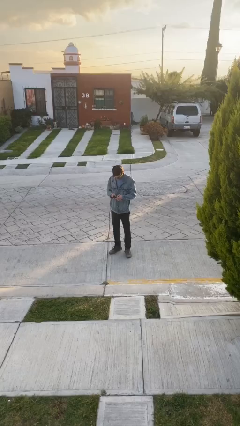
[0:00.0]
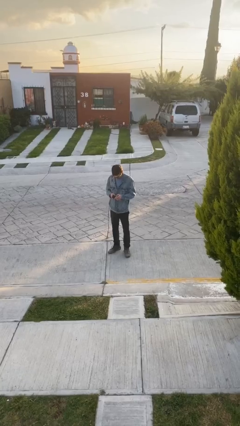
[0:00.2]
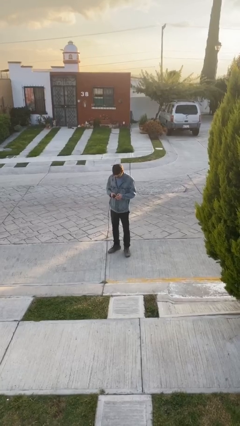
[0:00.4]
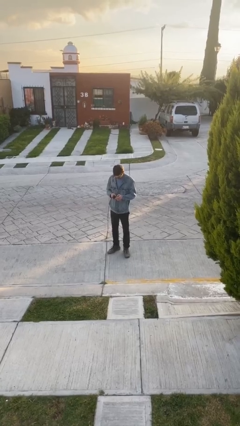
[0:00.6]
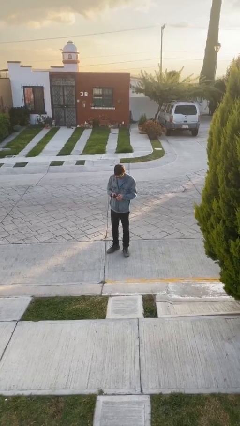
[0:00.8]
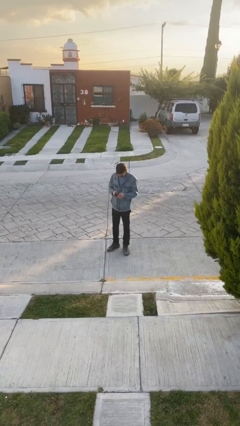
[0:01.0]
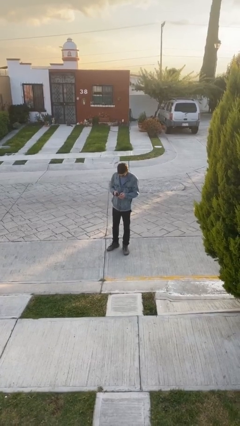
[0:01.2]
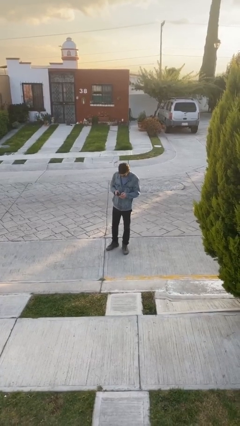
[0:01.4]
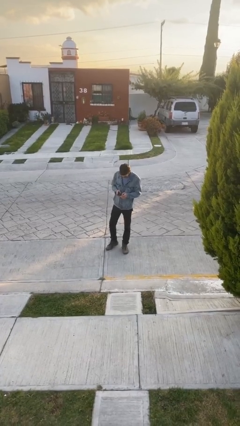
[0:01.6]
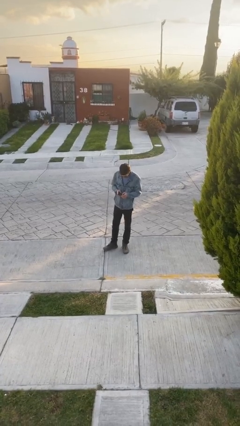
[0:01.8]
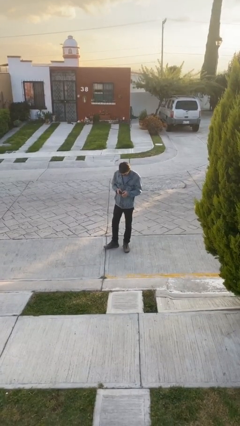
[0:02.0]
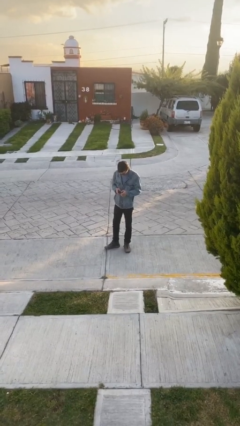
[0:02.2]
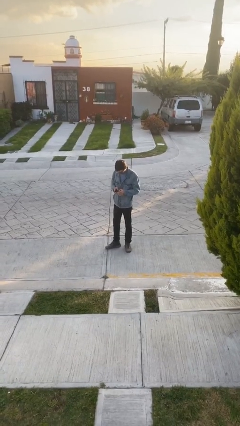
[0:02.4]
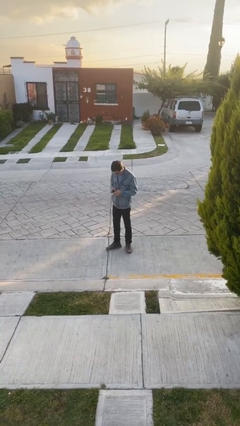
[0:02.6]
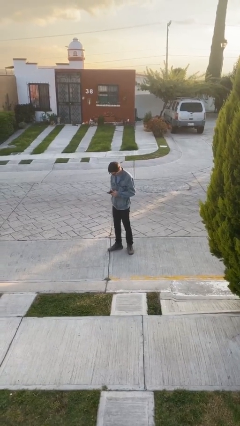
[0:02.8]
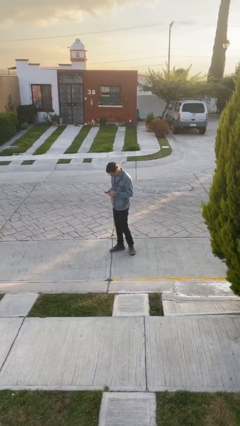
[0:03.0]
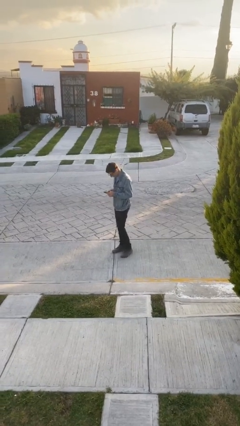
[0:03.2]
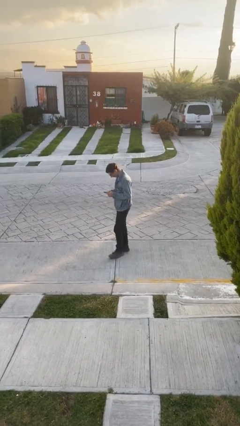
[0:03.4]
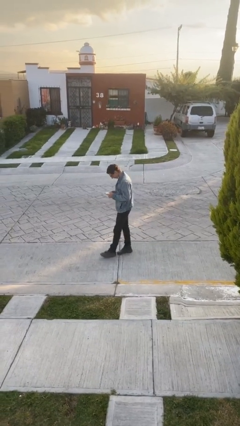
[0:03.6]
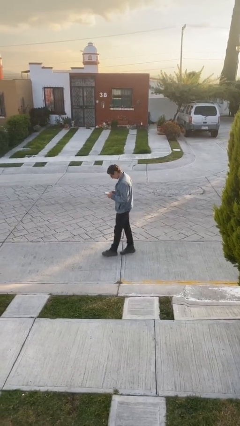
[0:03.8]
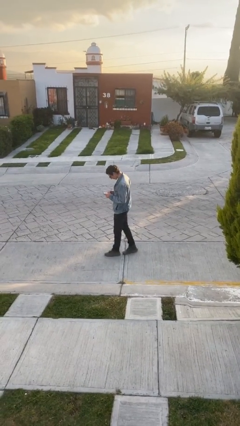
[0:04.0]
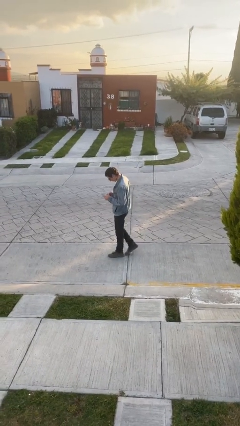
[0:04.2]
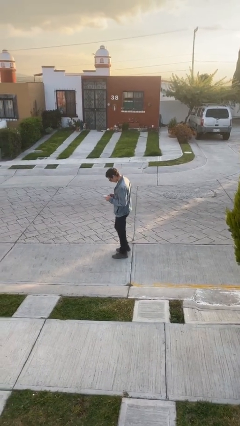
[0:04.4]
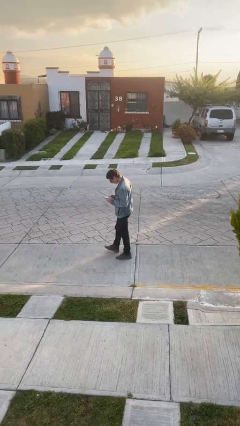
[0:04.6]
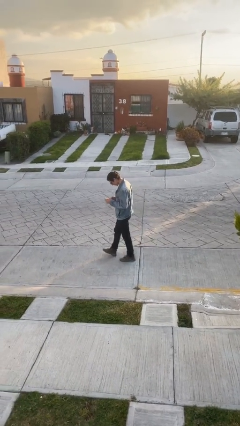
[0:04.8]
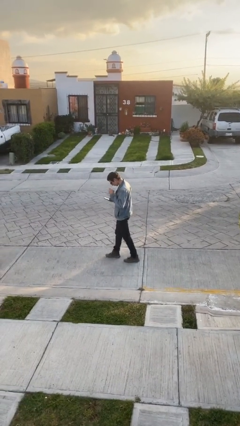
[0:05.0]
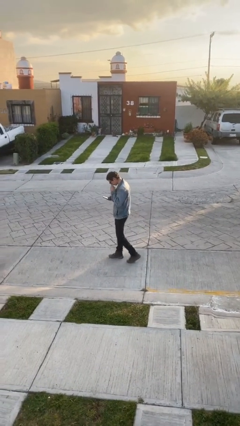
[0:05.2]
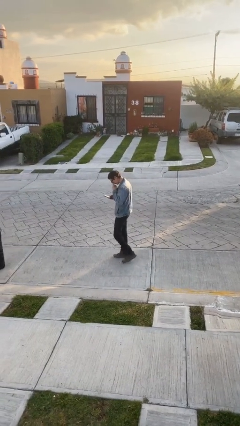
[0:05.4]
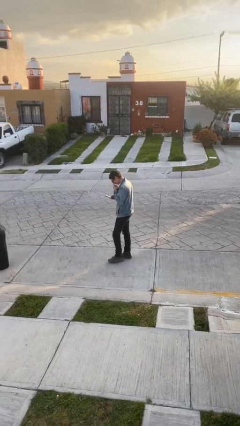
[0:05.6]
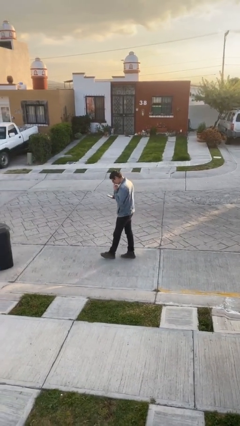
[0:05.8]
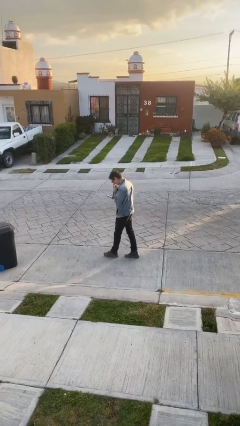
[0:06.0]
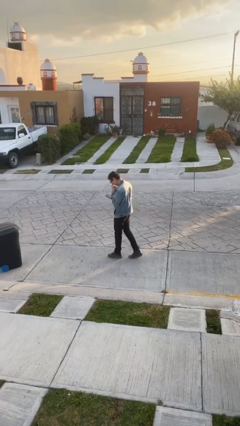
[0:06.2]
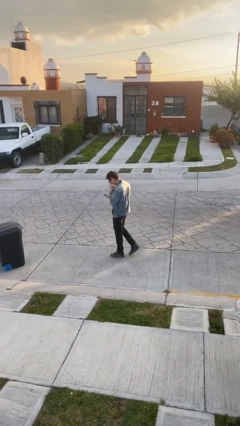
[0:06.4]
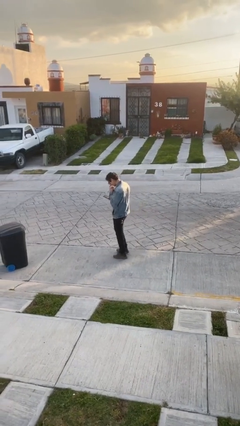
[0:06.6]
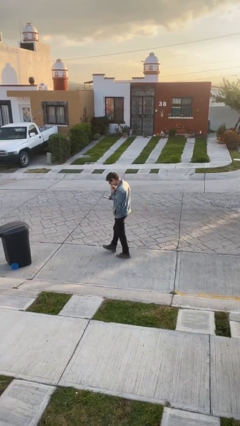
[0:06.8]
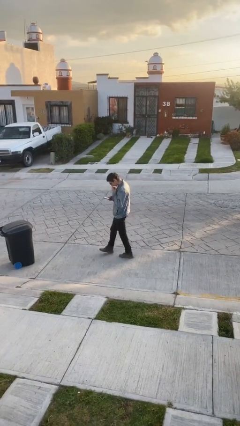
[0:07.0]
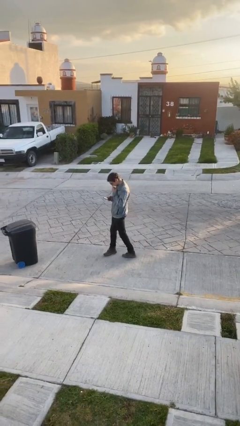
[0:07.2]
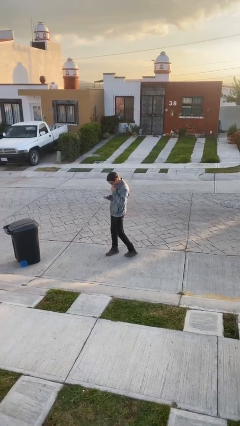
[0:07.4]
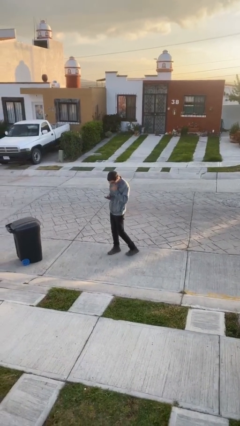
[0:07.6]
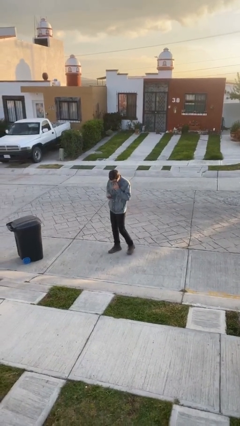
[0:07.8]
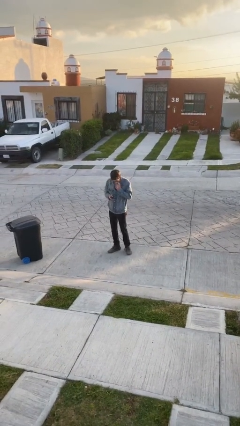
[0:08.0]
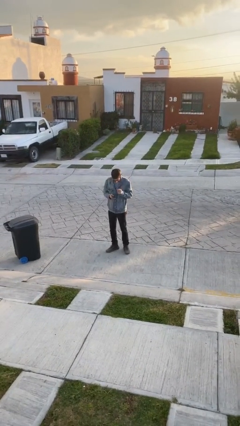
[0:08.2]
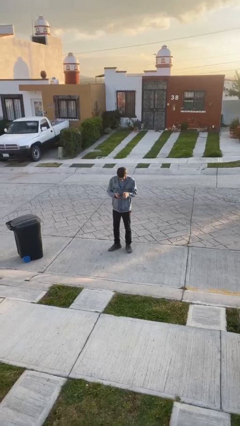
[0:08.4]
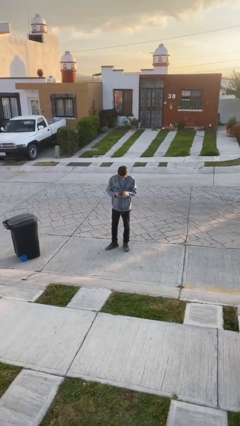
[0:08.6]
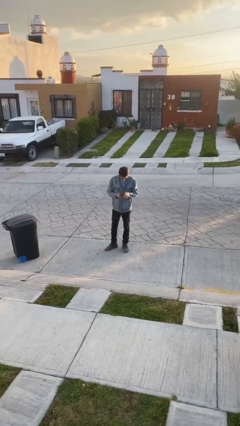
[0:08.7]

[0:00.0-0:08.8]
person texts on phone

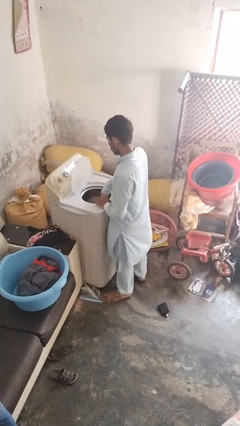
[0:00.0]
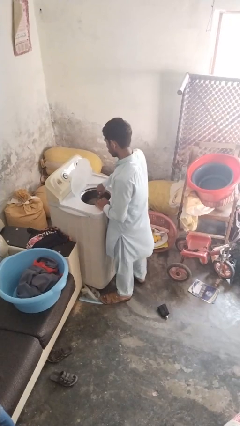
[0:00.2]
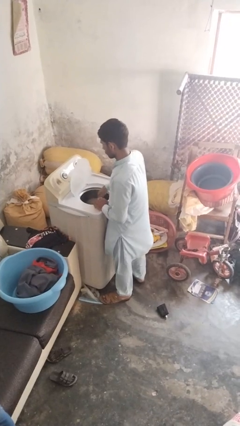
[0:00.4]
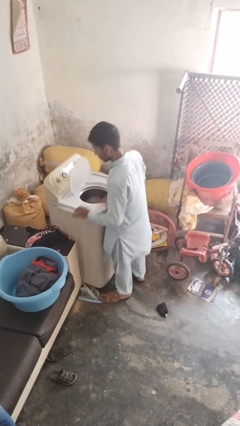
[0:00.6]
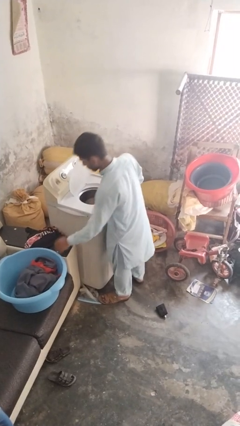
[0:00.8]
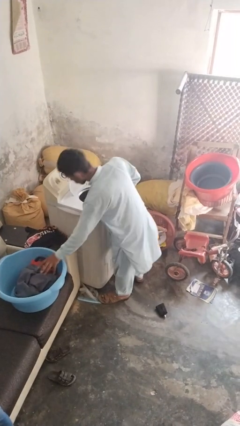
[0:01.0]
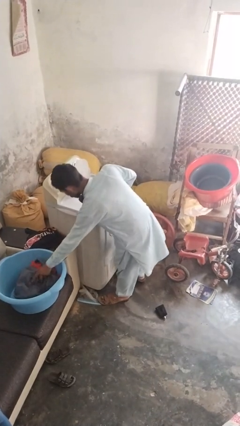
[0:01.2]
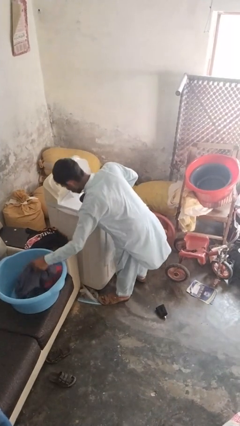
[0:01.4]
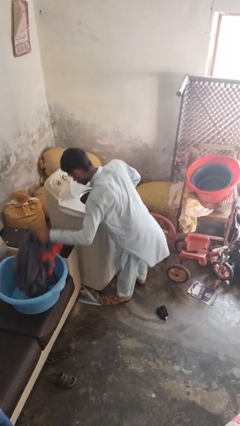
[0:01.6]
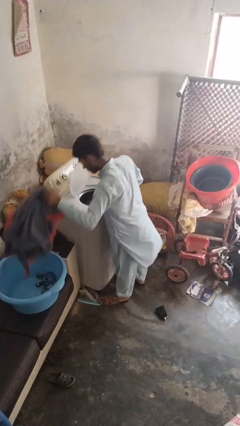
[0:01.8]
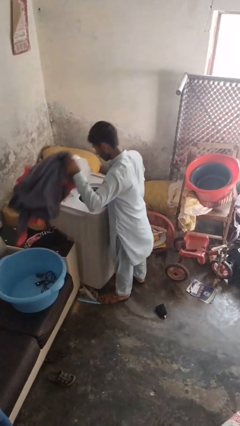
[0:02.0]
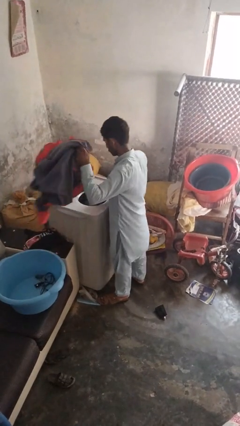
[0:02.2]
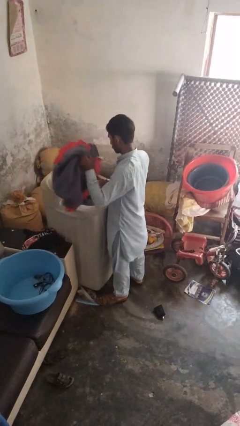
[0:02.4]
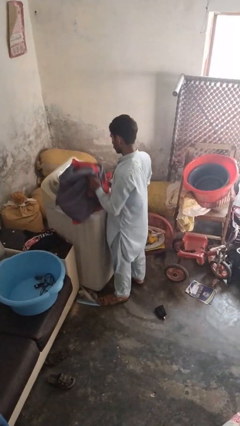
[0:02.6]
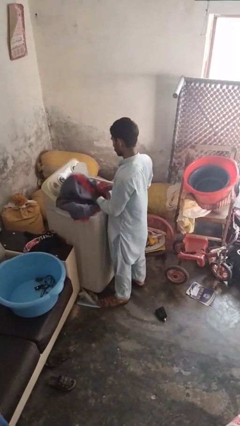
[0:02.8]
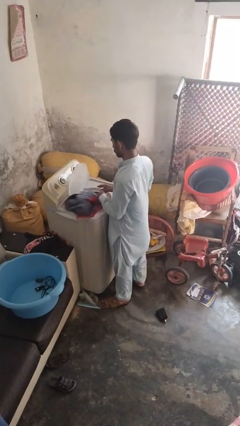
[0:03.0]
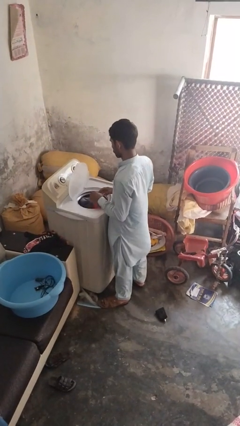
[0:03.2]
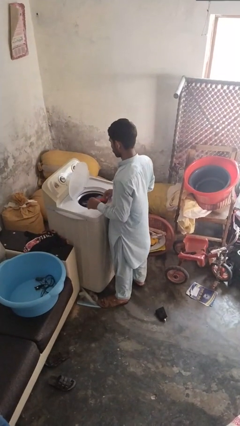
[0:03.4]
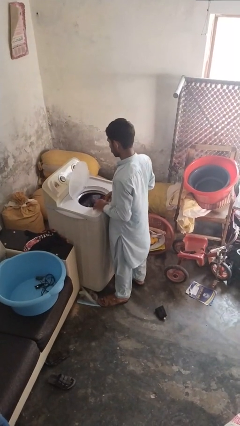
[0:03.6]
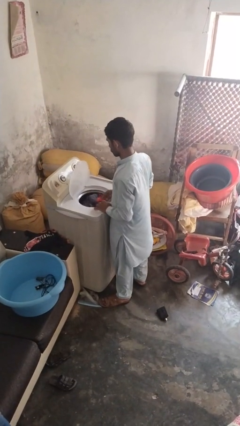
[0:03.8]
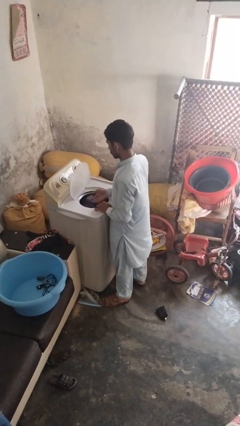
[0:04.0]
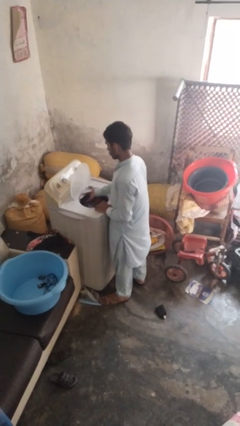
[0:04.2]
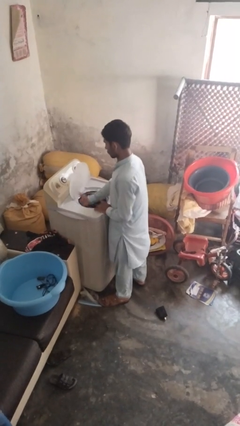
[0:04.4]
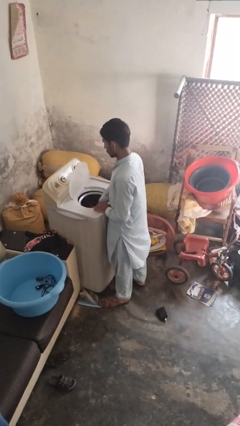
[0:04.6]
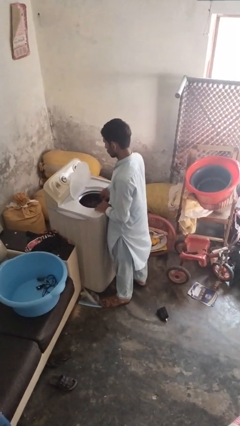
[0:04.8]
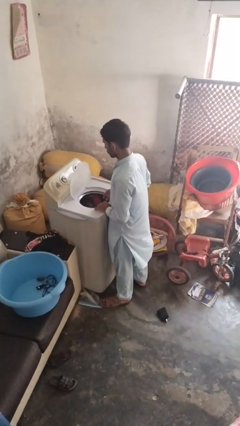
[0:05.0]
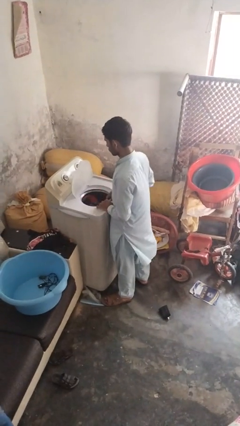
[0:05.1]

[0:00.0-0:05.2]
person loads clotheswasher

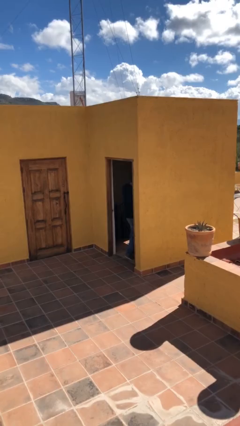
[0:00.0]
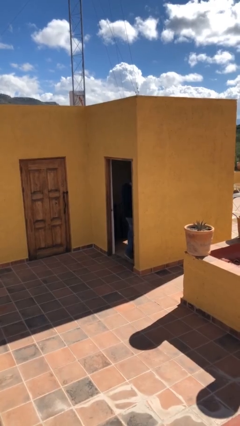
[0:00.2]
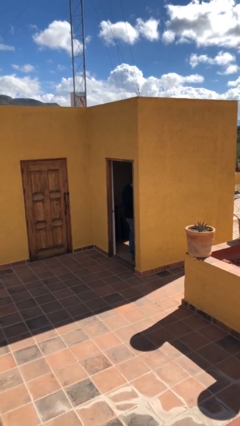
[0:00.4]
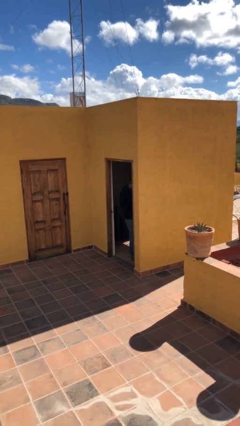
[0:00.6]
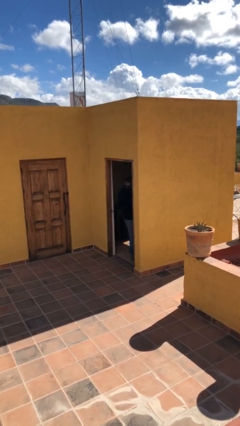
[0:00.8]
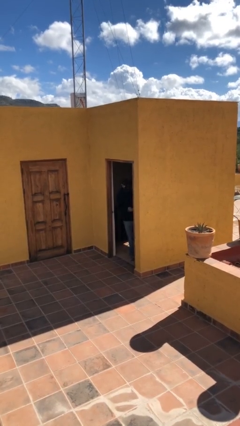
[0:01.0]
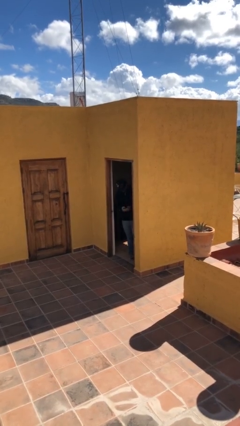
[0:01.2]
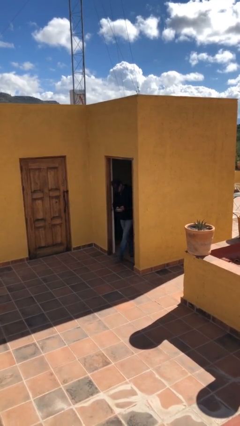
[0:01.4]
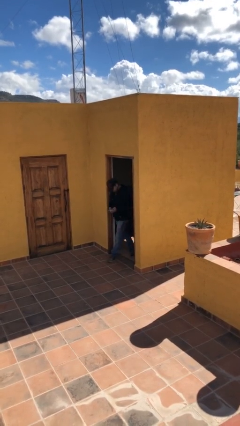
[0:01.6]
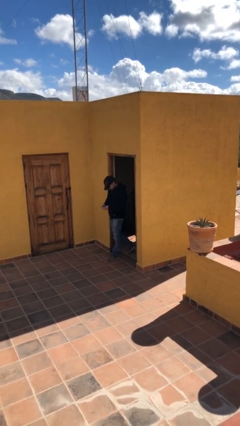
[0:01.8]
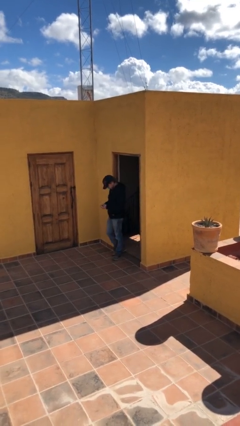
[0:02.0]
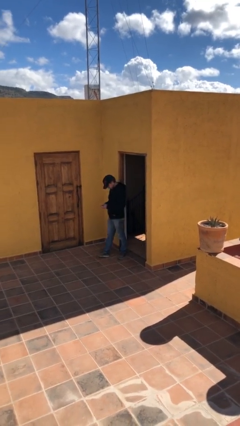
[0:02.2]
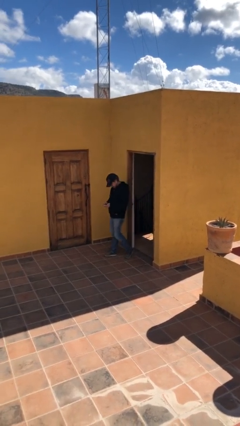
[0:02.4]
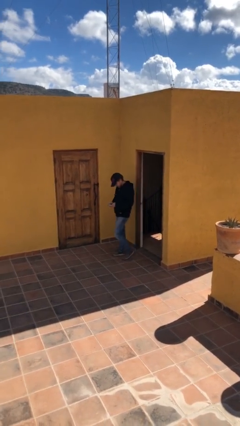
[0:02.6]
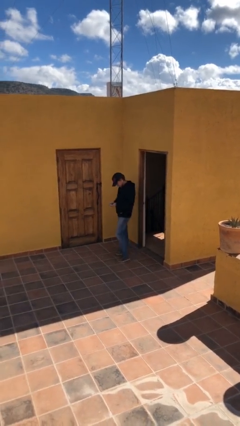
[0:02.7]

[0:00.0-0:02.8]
person enters scene through structure

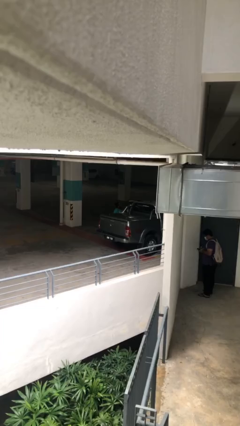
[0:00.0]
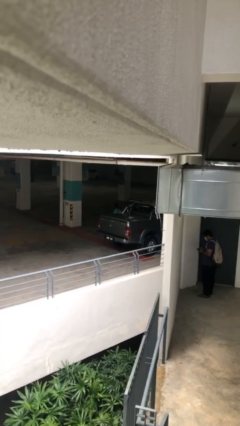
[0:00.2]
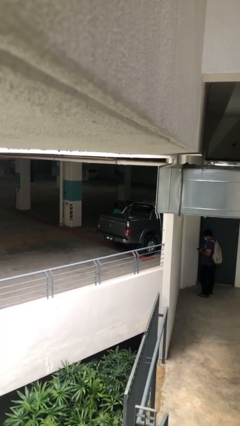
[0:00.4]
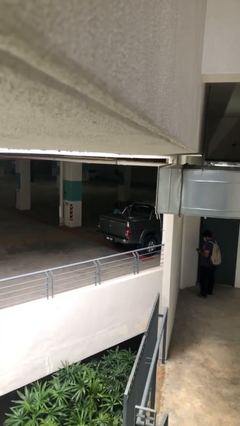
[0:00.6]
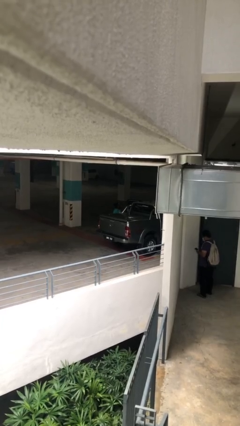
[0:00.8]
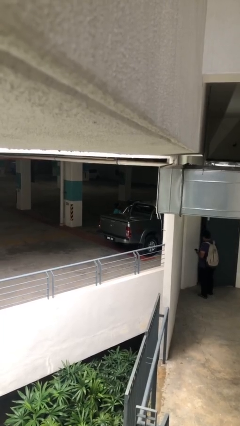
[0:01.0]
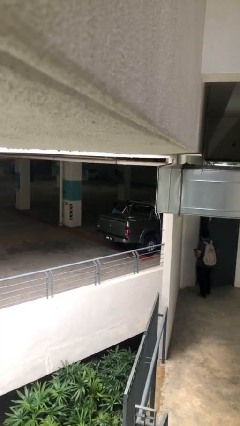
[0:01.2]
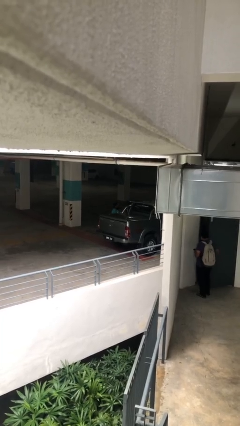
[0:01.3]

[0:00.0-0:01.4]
person opens car door
